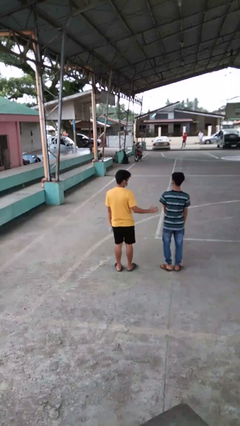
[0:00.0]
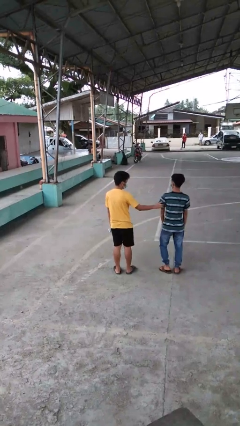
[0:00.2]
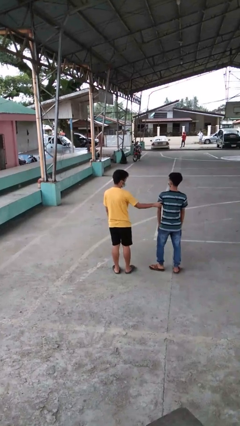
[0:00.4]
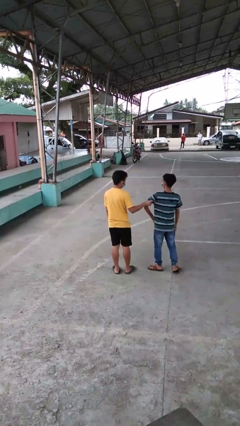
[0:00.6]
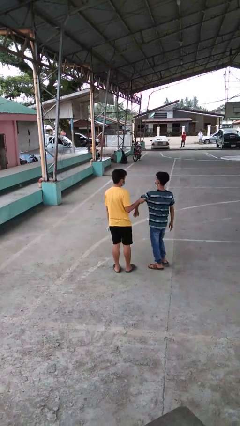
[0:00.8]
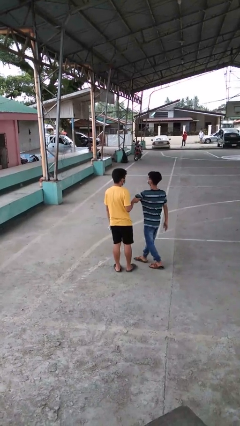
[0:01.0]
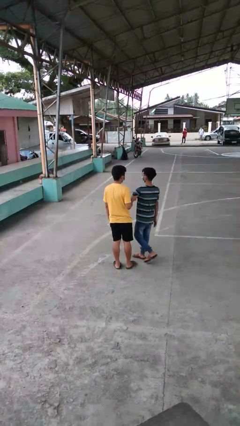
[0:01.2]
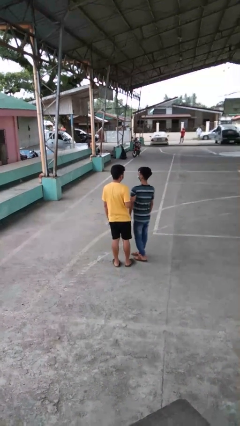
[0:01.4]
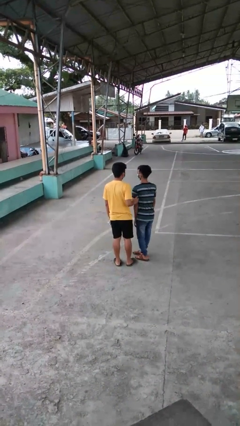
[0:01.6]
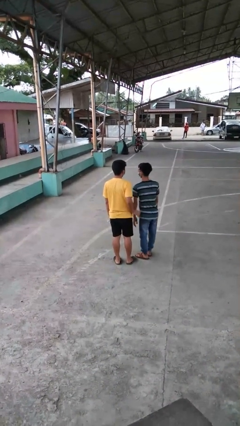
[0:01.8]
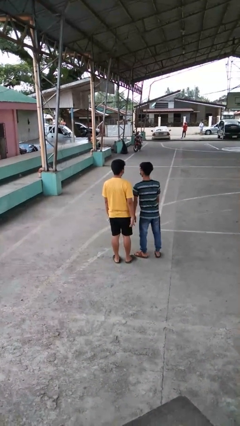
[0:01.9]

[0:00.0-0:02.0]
person grabs person by bicep

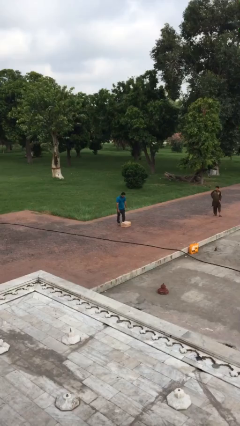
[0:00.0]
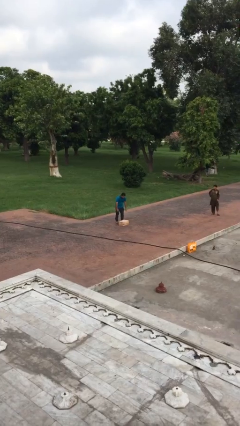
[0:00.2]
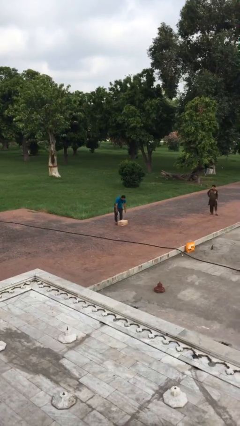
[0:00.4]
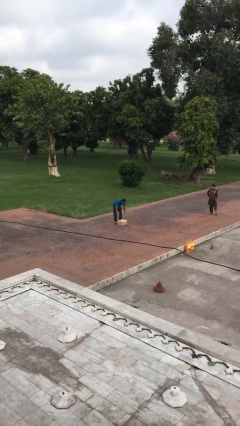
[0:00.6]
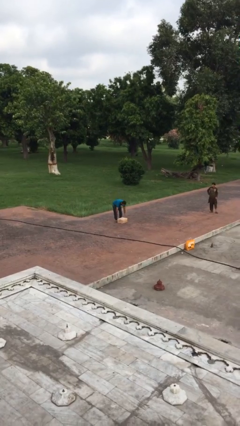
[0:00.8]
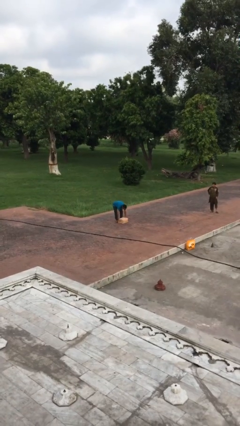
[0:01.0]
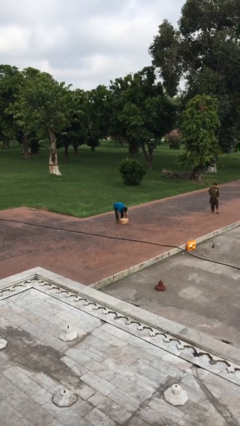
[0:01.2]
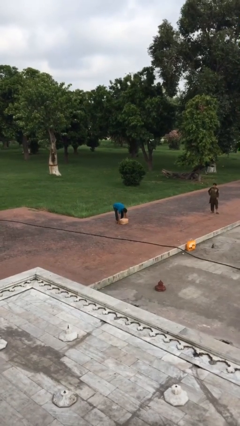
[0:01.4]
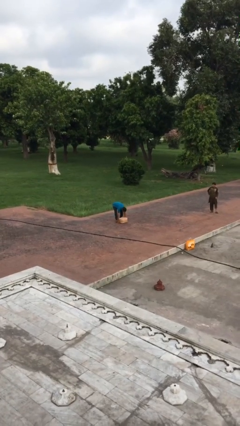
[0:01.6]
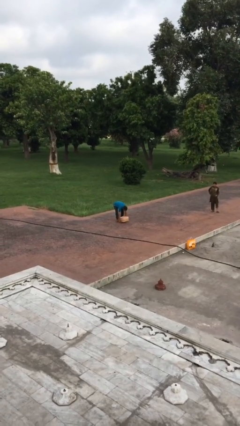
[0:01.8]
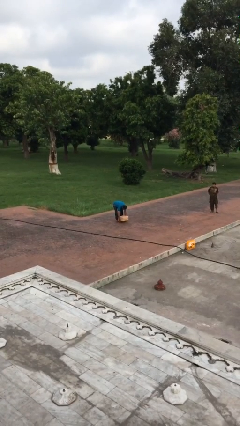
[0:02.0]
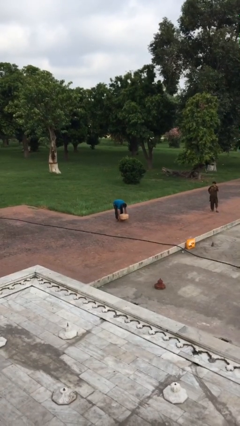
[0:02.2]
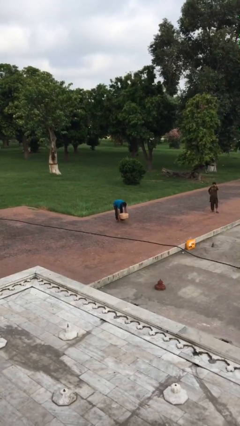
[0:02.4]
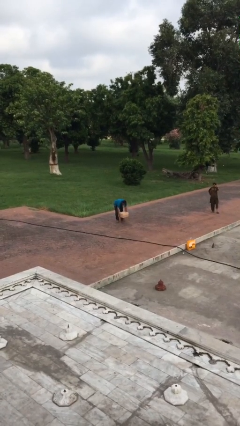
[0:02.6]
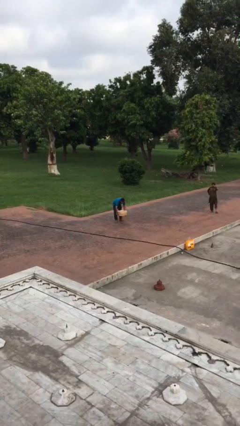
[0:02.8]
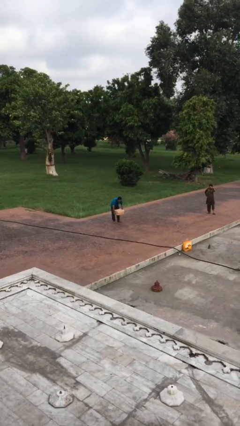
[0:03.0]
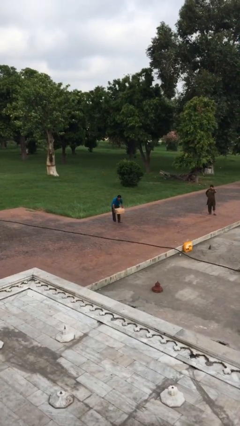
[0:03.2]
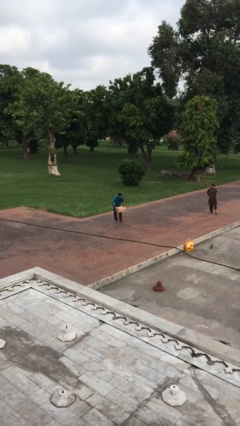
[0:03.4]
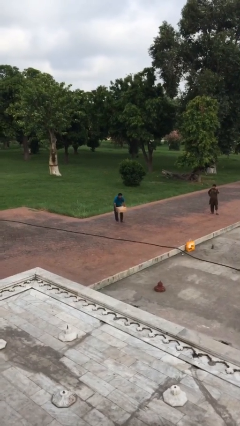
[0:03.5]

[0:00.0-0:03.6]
person picks up object from floor

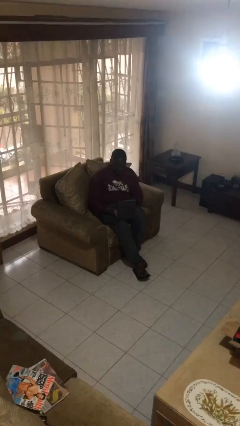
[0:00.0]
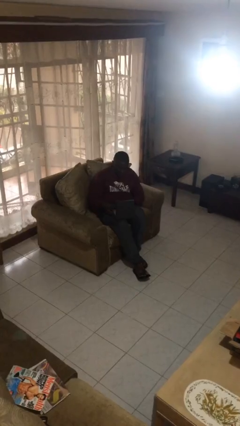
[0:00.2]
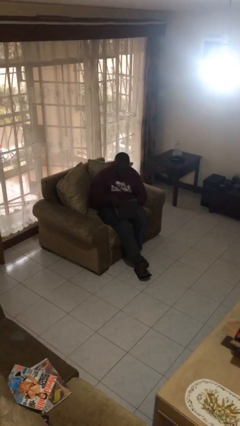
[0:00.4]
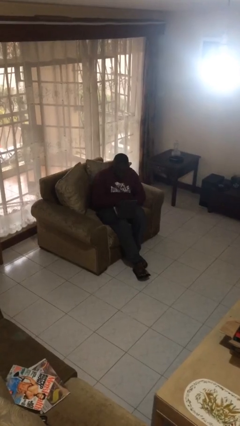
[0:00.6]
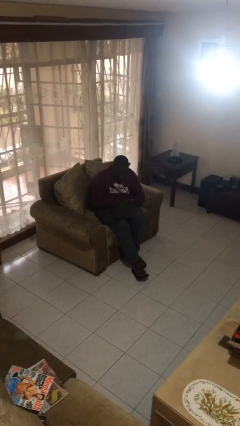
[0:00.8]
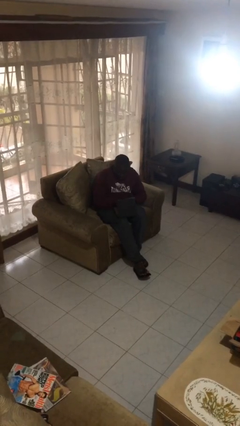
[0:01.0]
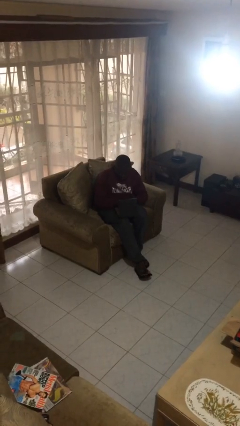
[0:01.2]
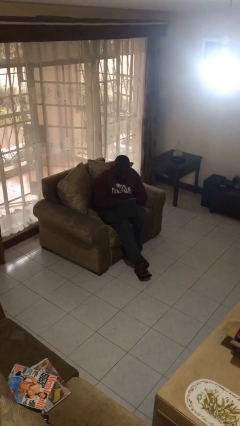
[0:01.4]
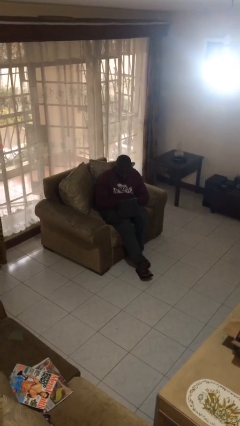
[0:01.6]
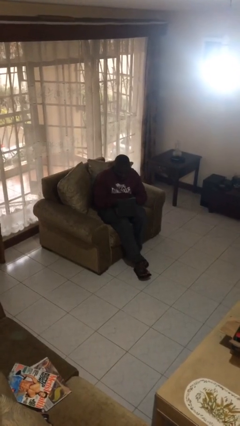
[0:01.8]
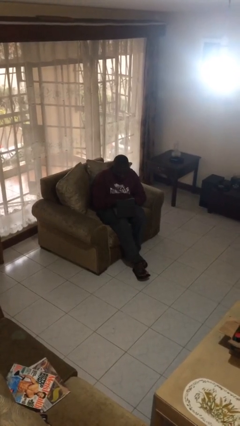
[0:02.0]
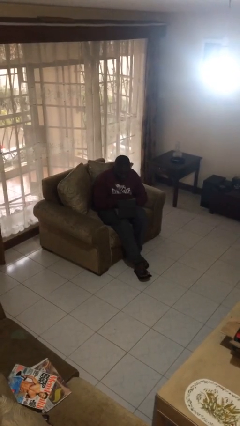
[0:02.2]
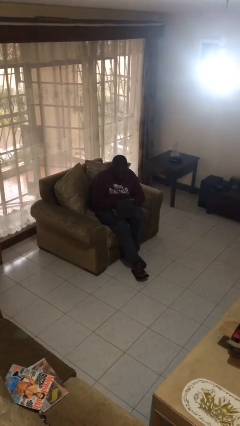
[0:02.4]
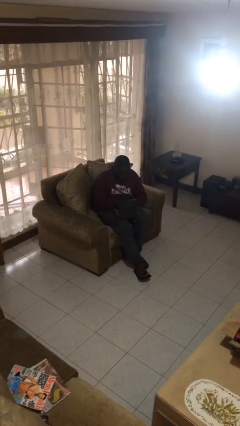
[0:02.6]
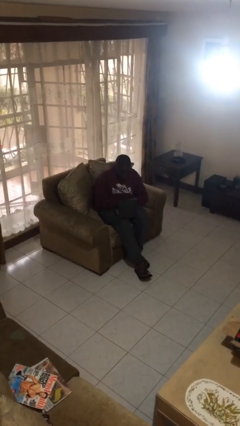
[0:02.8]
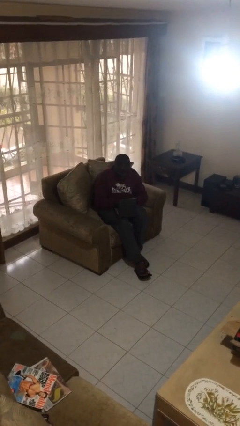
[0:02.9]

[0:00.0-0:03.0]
person searches jewelry box

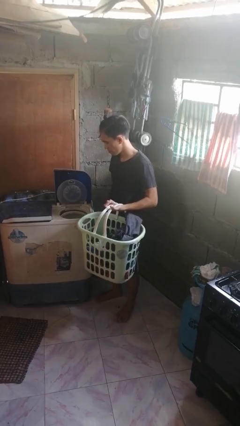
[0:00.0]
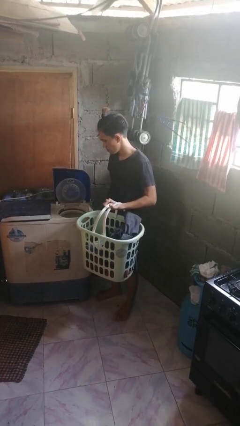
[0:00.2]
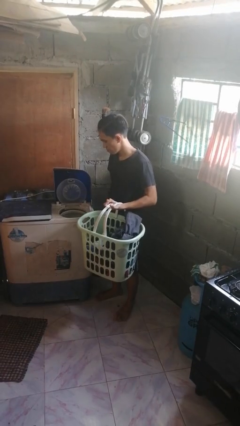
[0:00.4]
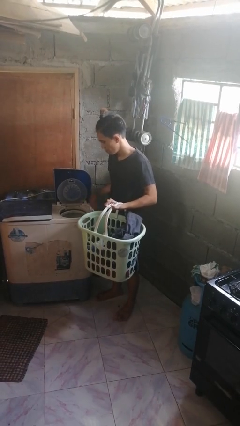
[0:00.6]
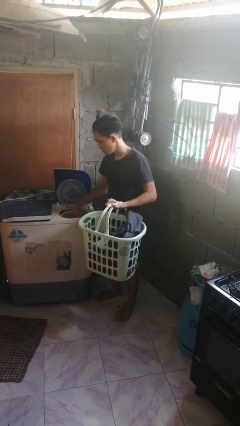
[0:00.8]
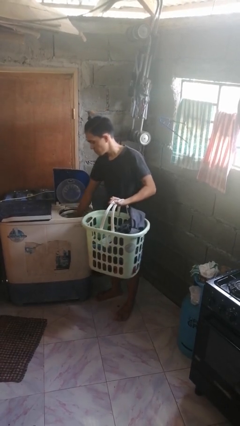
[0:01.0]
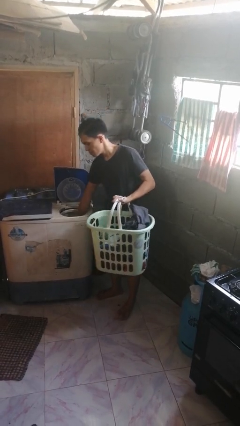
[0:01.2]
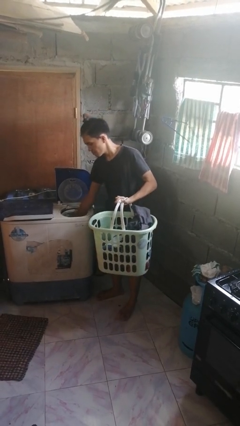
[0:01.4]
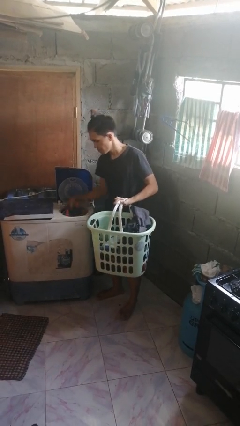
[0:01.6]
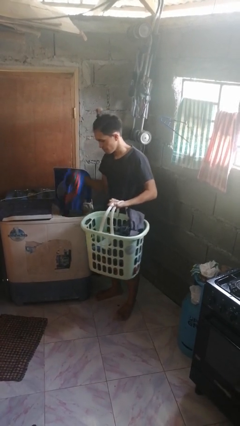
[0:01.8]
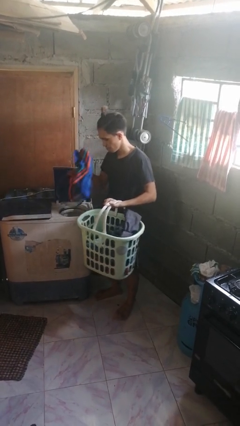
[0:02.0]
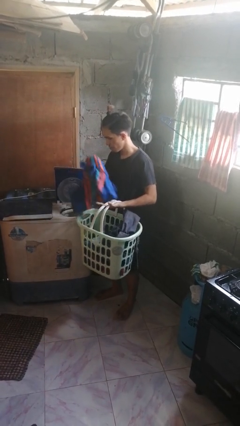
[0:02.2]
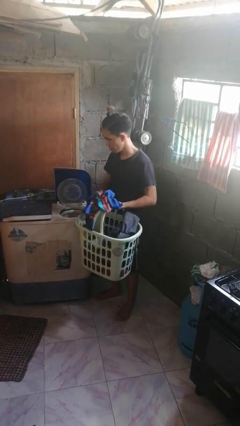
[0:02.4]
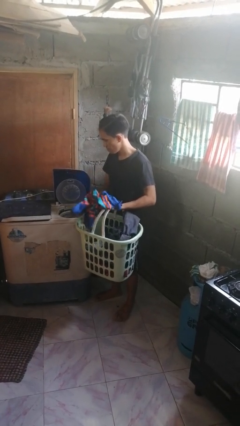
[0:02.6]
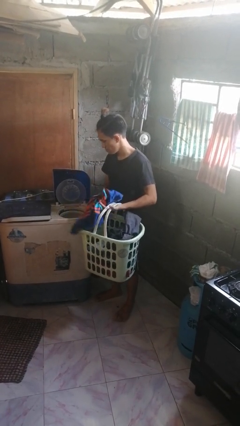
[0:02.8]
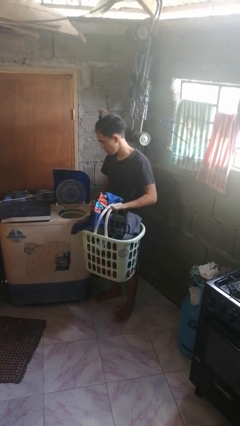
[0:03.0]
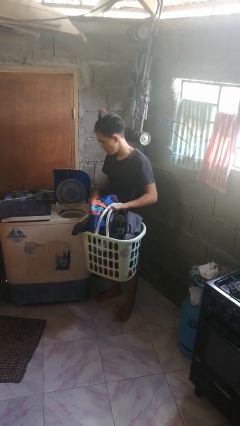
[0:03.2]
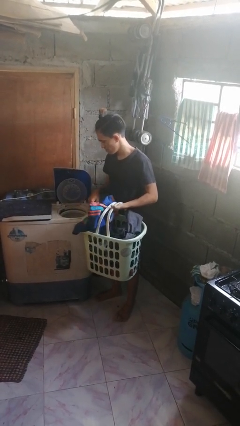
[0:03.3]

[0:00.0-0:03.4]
person unloads dryer

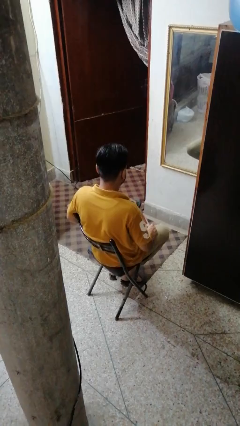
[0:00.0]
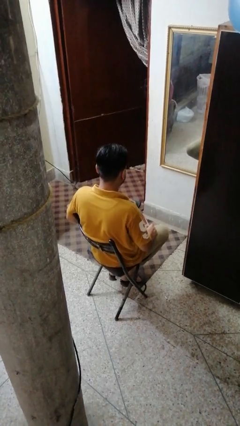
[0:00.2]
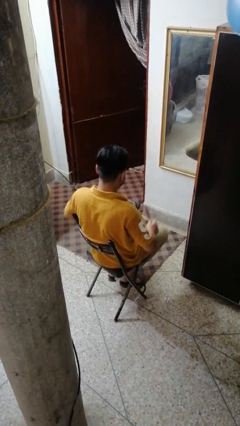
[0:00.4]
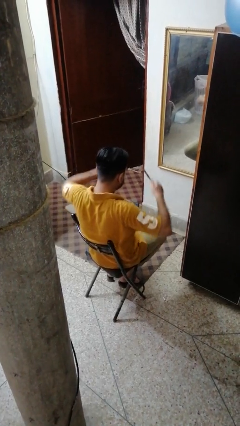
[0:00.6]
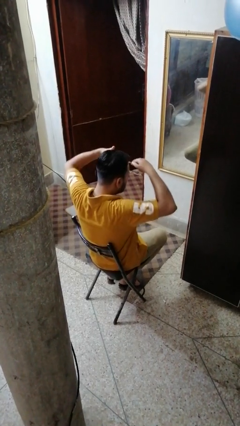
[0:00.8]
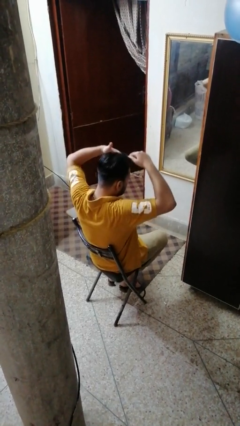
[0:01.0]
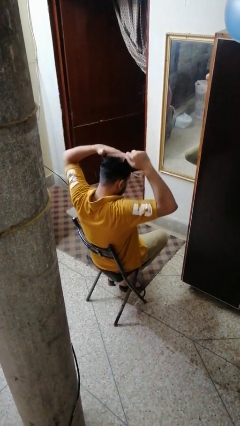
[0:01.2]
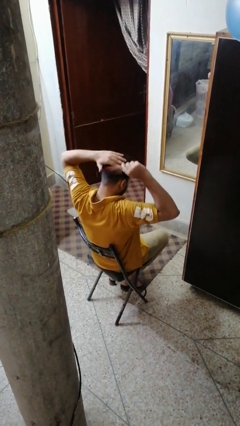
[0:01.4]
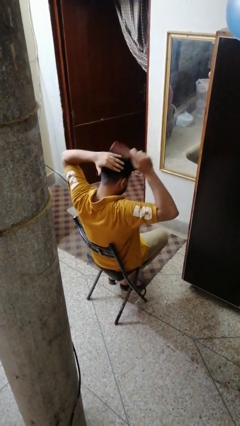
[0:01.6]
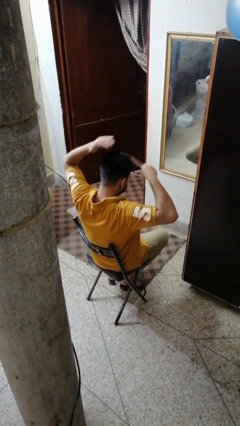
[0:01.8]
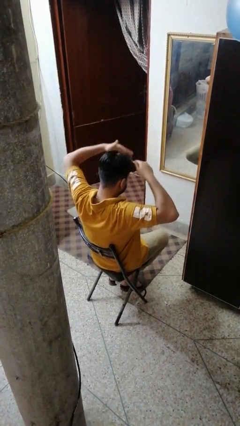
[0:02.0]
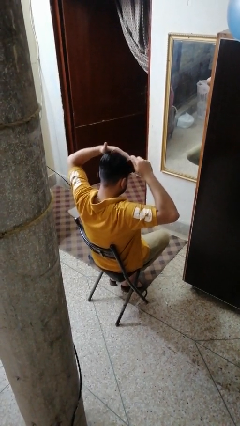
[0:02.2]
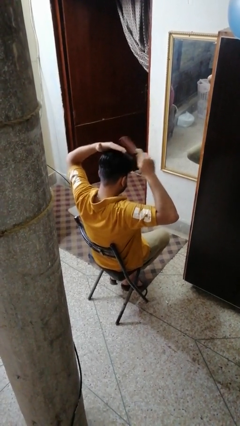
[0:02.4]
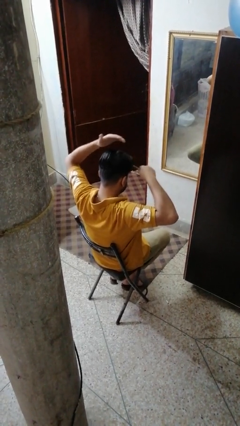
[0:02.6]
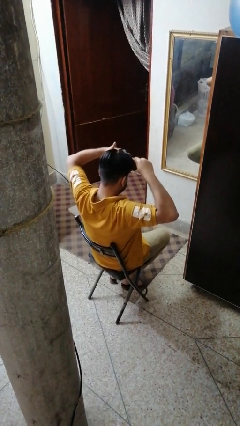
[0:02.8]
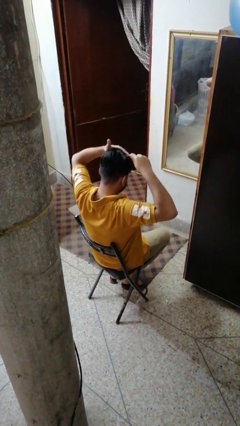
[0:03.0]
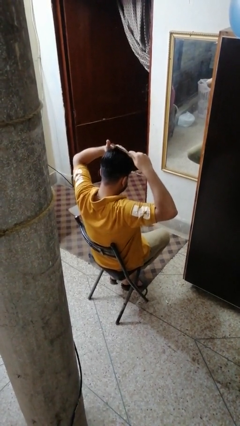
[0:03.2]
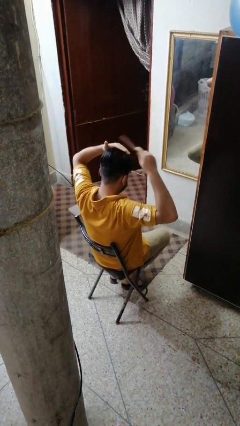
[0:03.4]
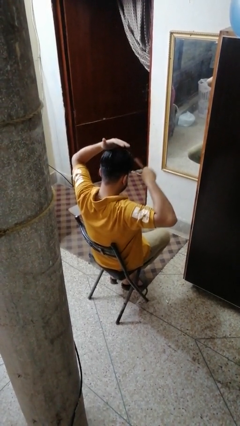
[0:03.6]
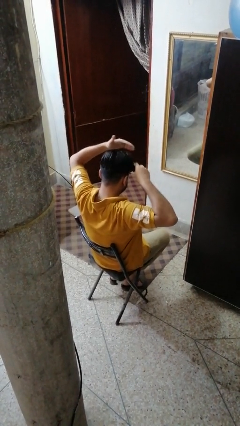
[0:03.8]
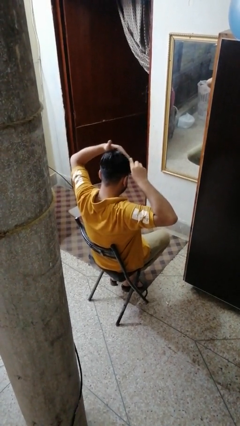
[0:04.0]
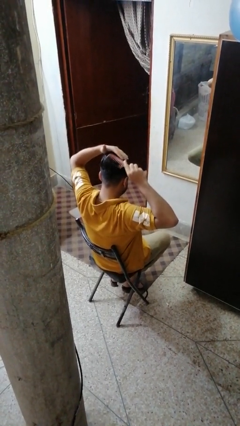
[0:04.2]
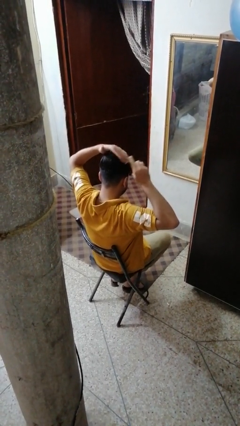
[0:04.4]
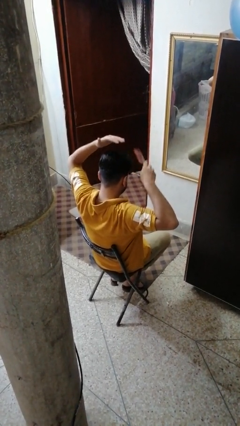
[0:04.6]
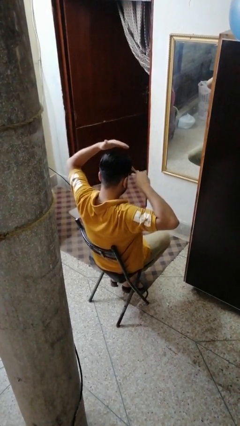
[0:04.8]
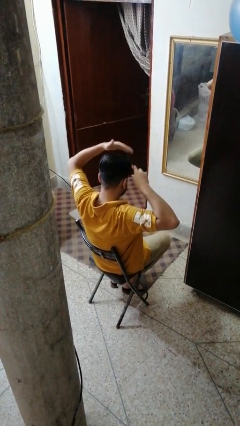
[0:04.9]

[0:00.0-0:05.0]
person brushes hair

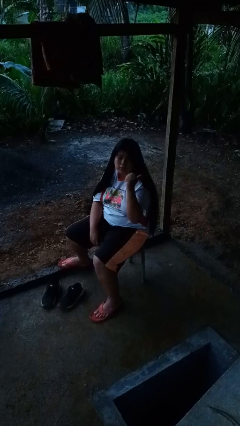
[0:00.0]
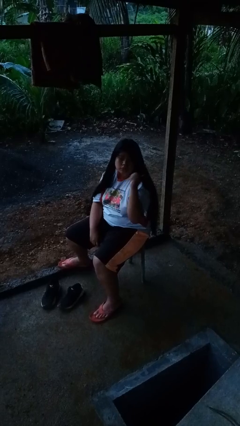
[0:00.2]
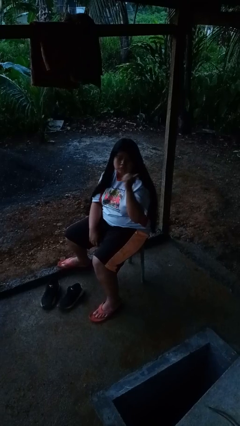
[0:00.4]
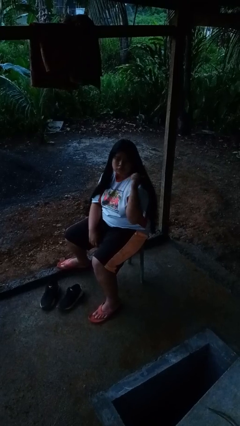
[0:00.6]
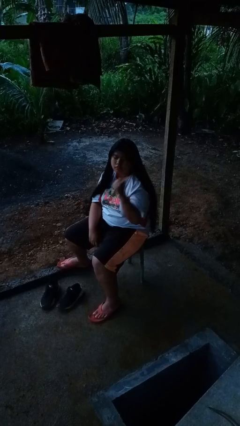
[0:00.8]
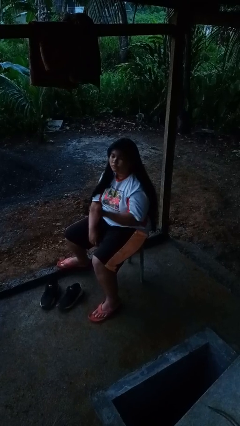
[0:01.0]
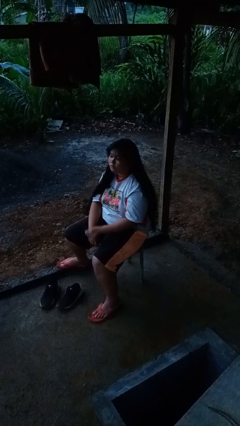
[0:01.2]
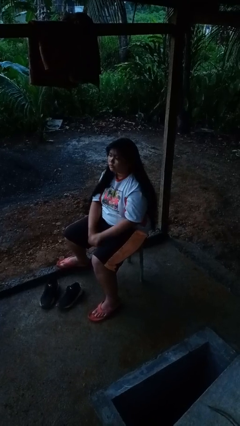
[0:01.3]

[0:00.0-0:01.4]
person gestures behind me
